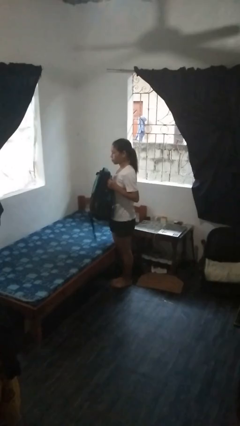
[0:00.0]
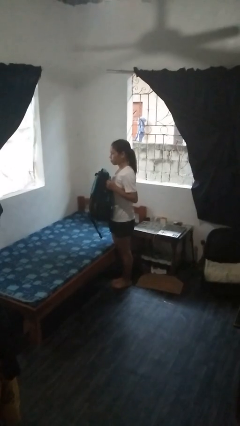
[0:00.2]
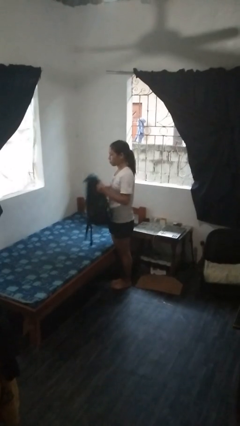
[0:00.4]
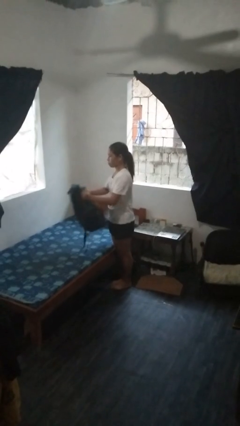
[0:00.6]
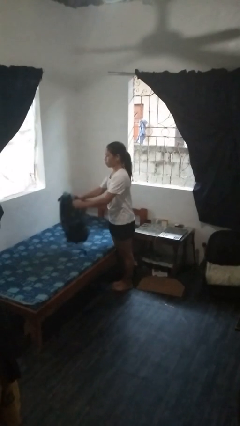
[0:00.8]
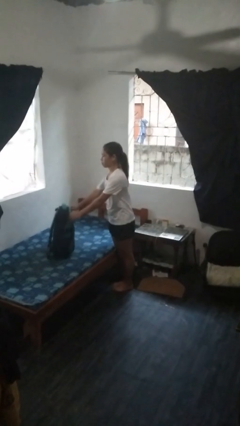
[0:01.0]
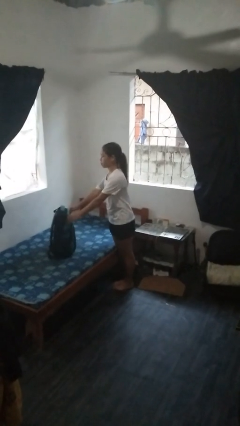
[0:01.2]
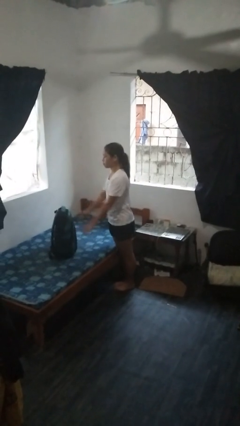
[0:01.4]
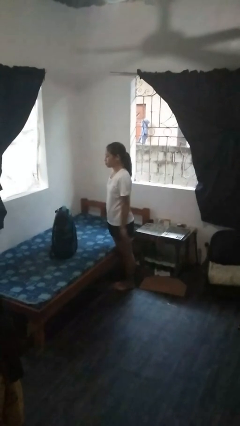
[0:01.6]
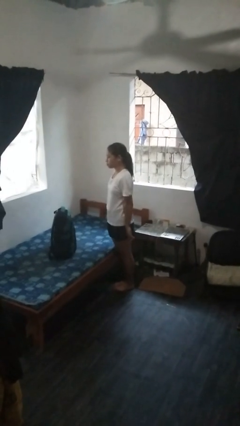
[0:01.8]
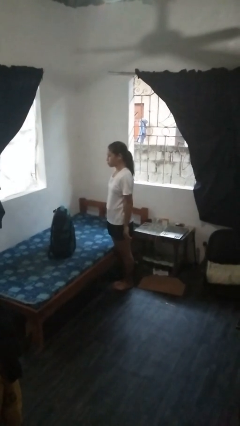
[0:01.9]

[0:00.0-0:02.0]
person puts down object on bed

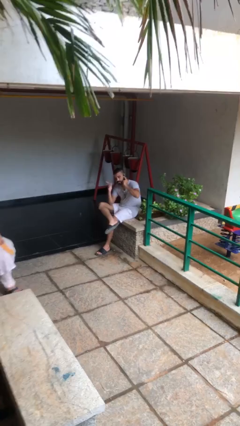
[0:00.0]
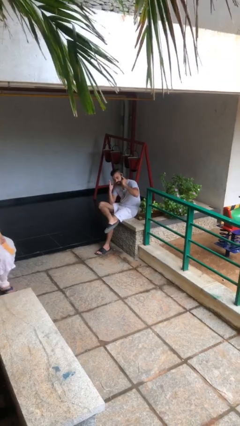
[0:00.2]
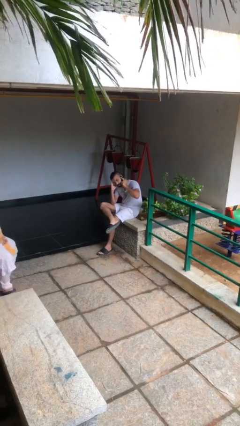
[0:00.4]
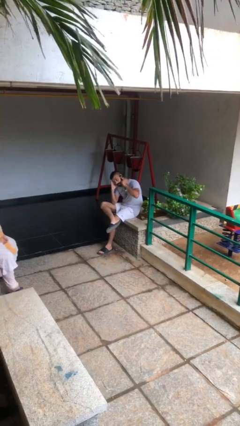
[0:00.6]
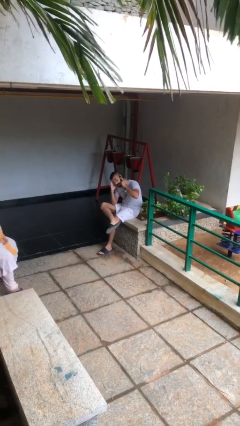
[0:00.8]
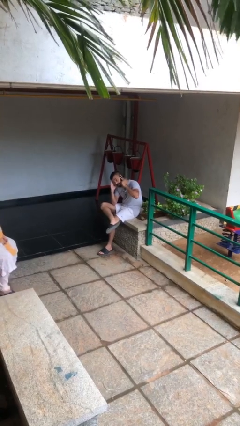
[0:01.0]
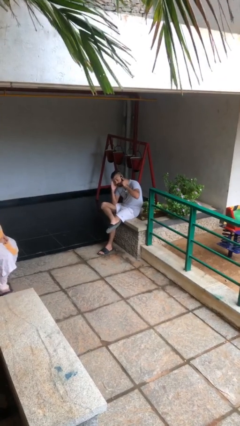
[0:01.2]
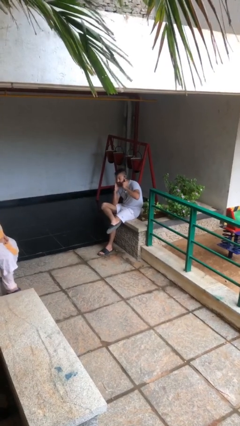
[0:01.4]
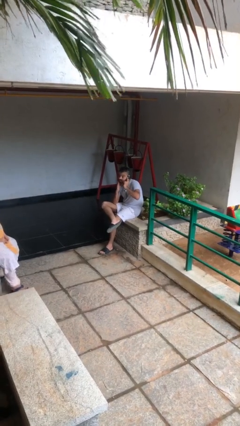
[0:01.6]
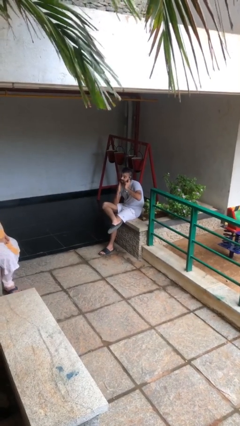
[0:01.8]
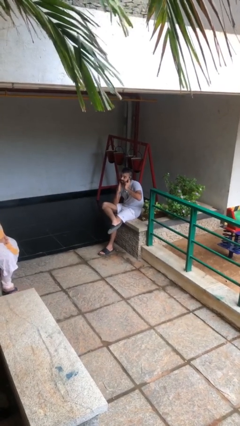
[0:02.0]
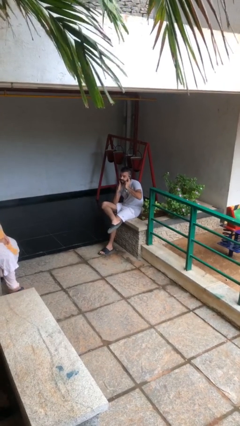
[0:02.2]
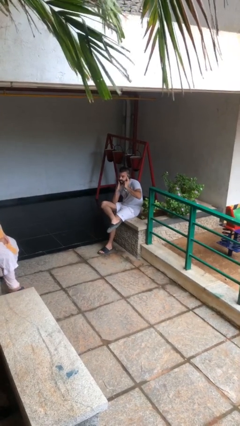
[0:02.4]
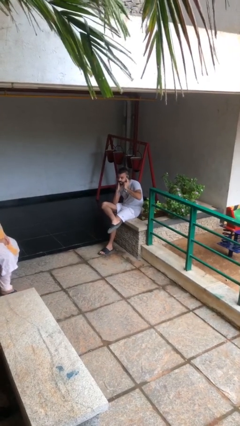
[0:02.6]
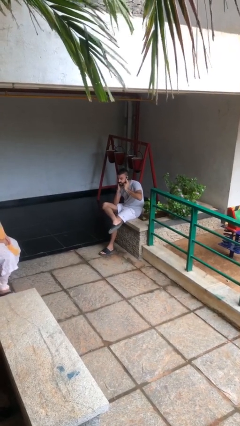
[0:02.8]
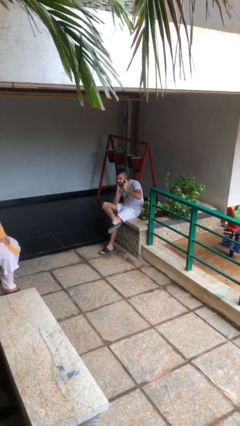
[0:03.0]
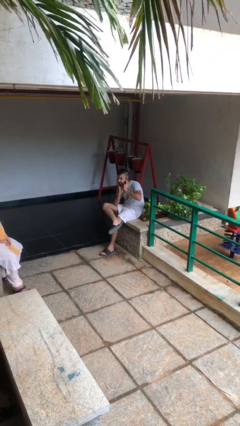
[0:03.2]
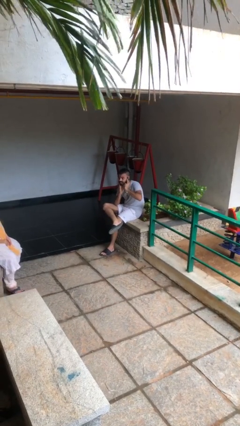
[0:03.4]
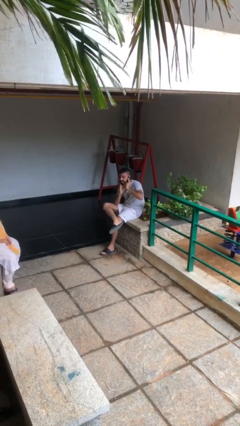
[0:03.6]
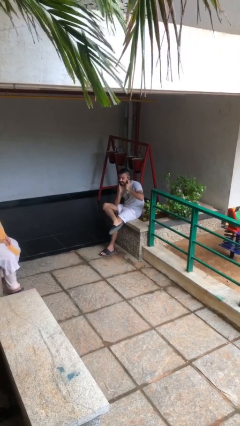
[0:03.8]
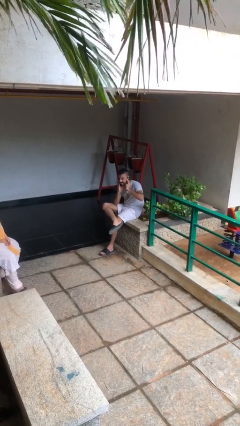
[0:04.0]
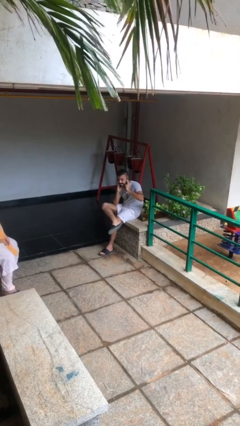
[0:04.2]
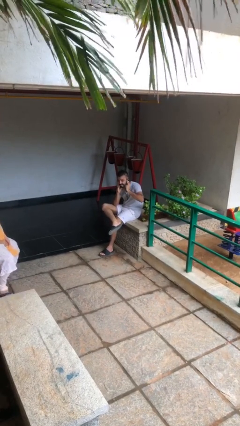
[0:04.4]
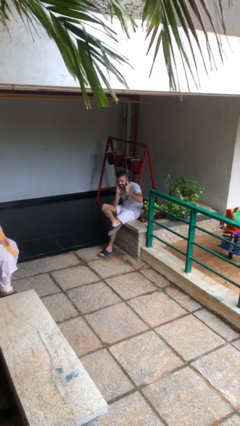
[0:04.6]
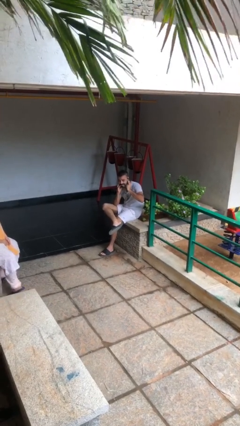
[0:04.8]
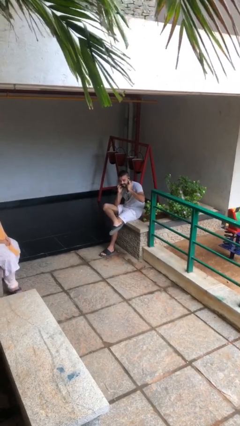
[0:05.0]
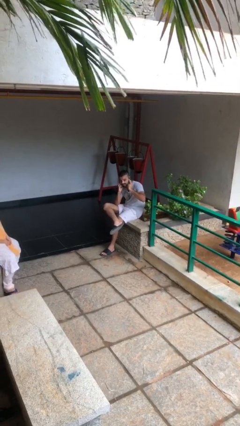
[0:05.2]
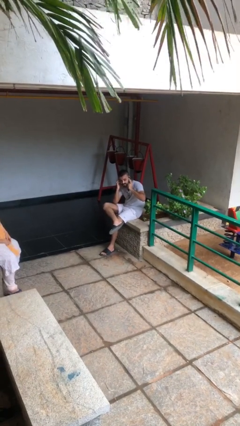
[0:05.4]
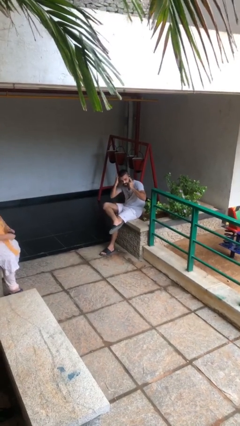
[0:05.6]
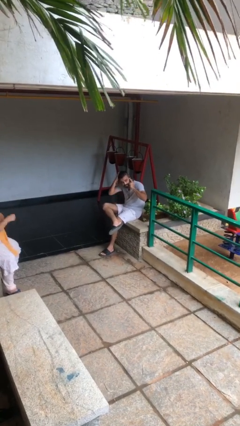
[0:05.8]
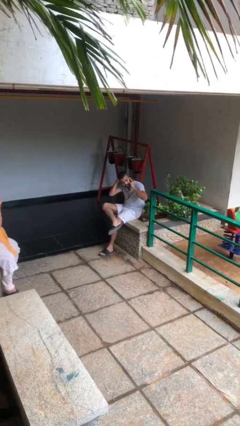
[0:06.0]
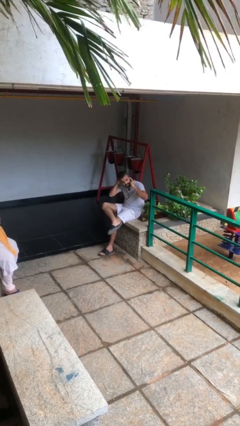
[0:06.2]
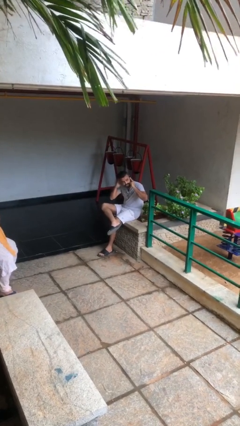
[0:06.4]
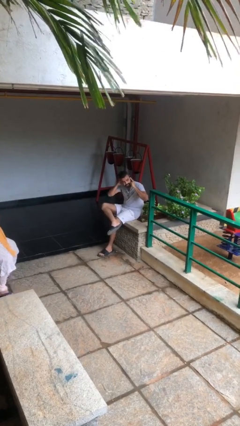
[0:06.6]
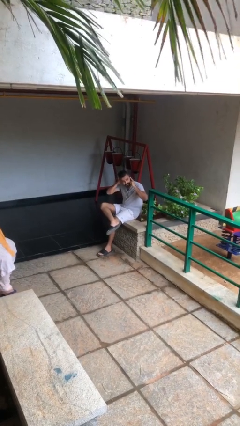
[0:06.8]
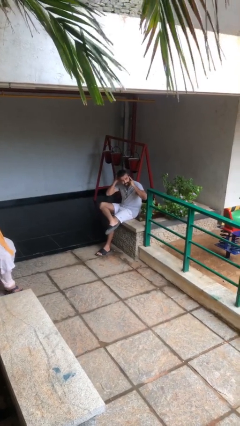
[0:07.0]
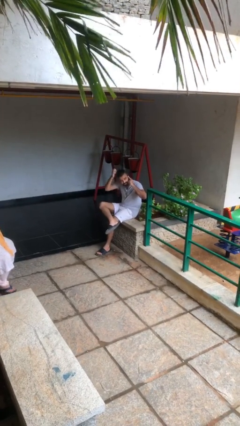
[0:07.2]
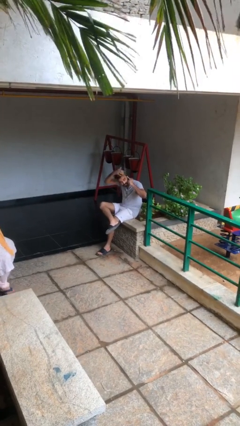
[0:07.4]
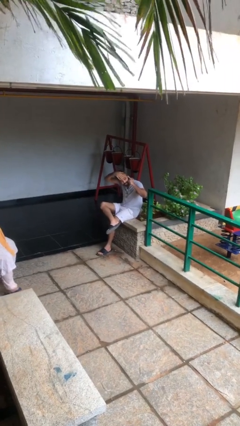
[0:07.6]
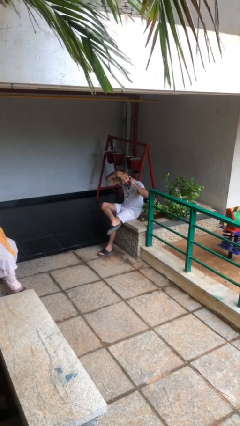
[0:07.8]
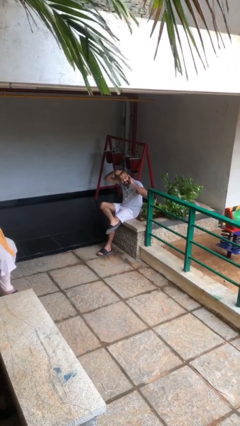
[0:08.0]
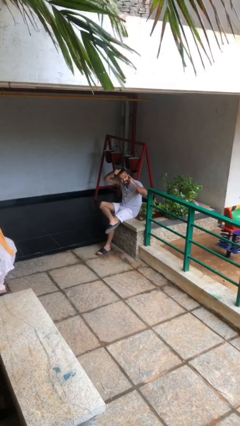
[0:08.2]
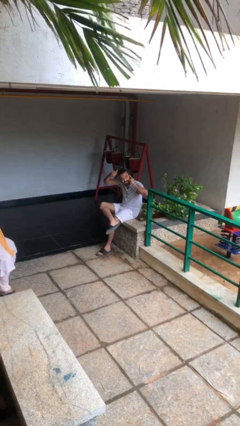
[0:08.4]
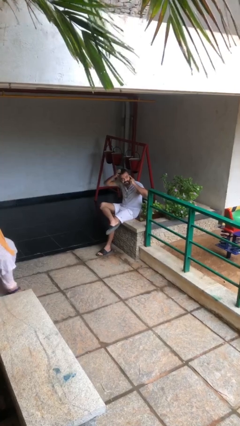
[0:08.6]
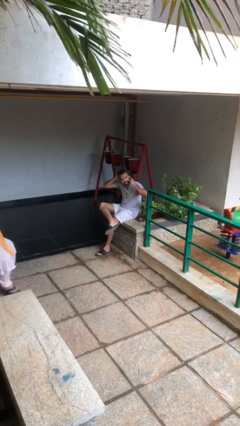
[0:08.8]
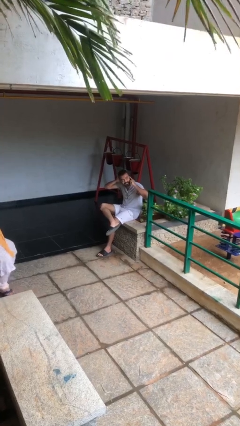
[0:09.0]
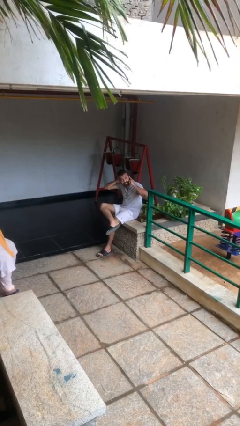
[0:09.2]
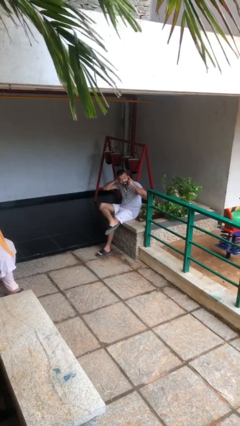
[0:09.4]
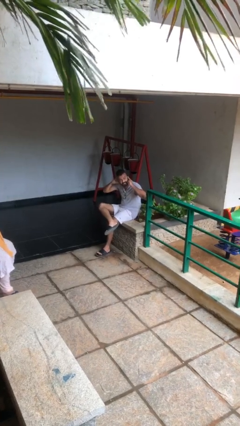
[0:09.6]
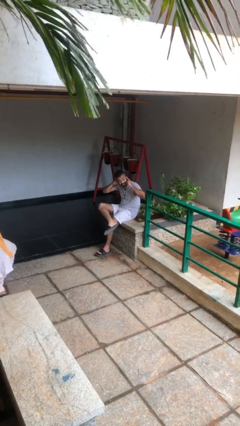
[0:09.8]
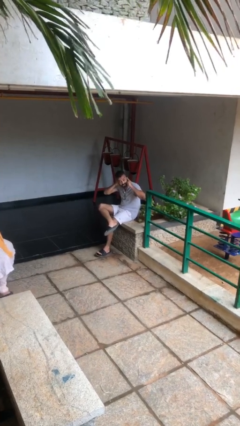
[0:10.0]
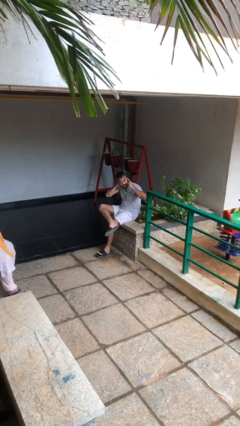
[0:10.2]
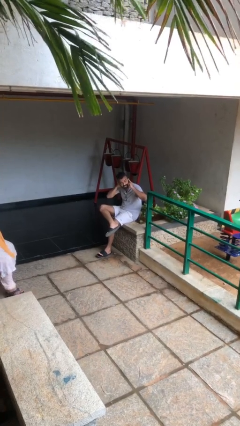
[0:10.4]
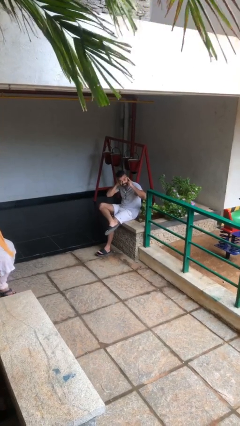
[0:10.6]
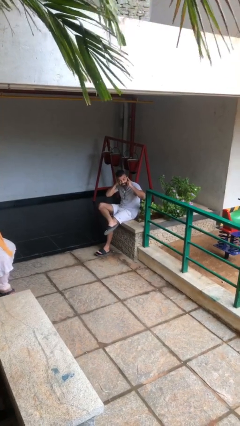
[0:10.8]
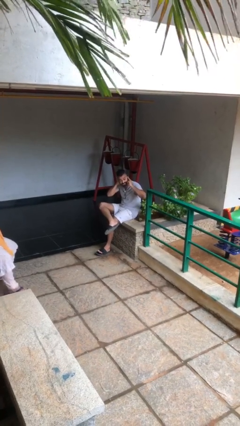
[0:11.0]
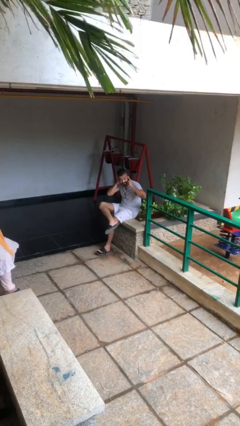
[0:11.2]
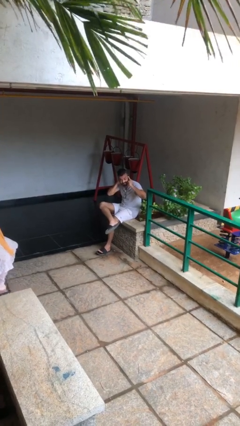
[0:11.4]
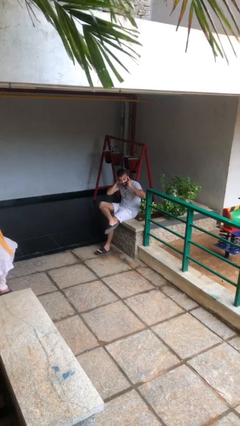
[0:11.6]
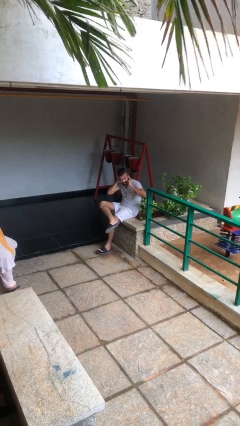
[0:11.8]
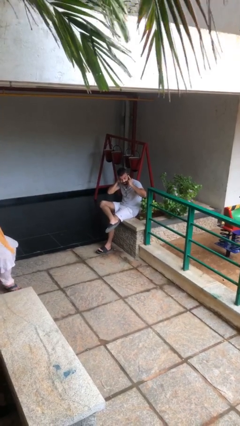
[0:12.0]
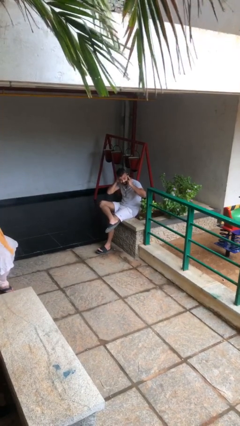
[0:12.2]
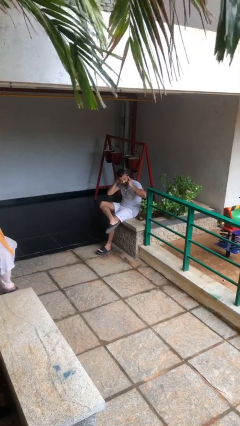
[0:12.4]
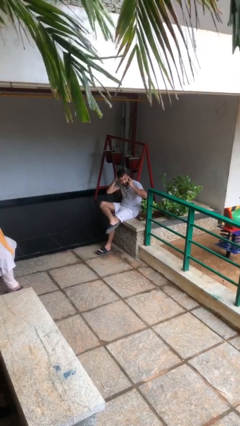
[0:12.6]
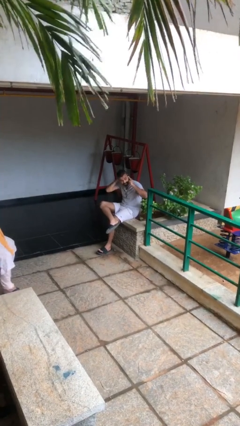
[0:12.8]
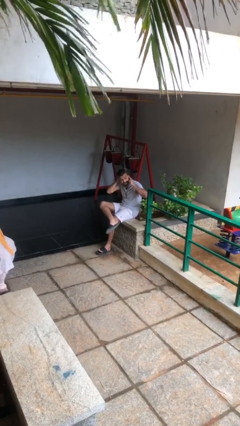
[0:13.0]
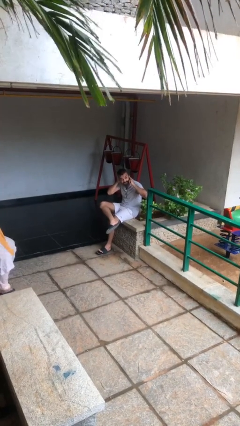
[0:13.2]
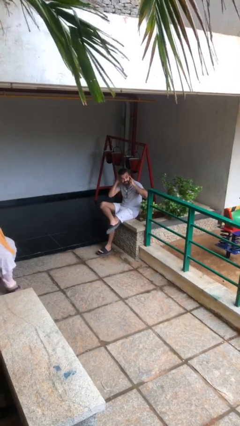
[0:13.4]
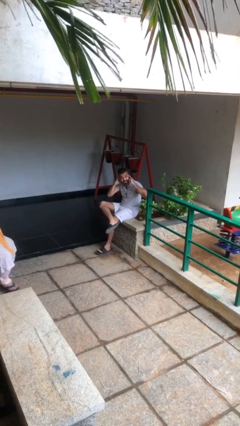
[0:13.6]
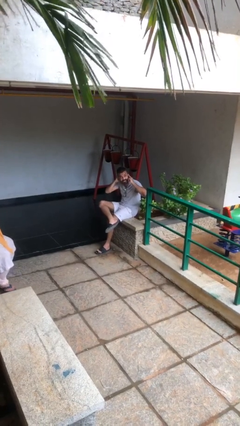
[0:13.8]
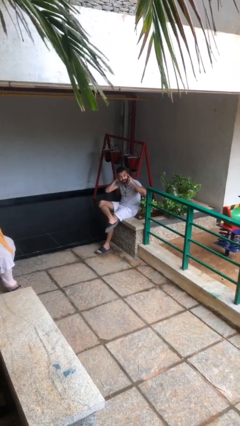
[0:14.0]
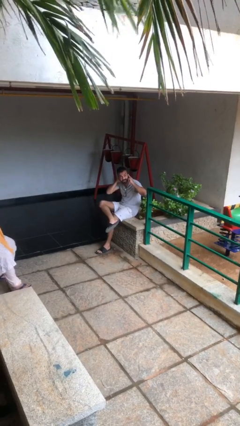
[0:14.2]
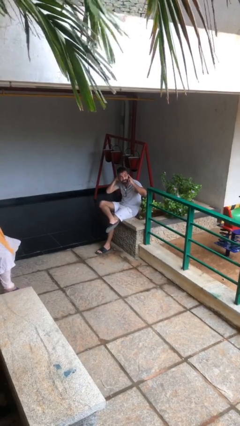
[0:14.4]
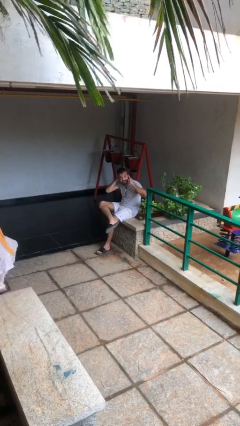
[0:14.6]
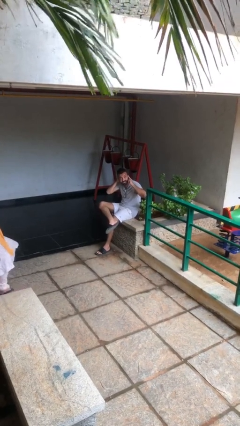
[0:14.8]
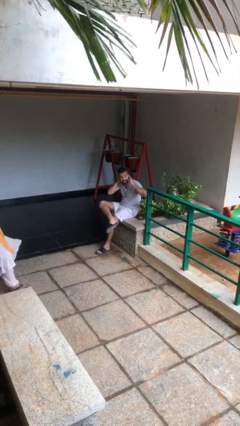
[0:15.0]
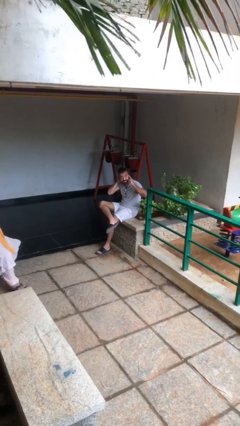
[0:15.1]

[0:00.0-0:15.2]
person talks on phone

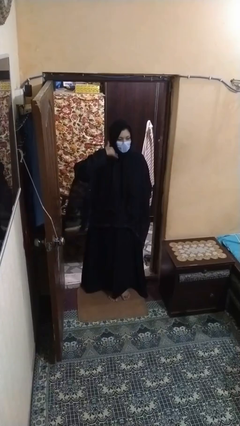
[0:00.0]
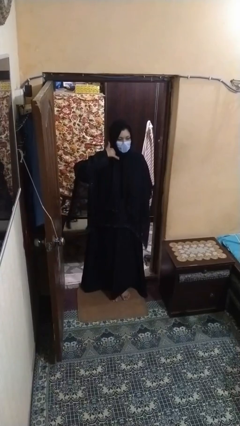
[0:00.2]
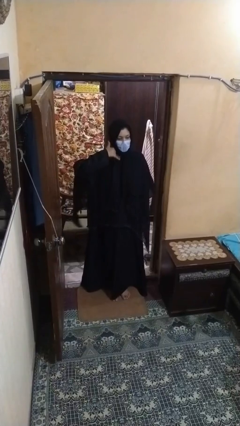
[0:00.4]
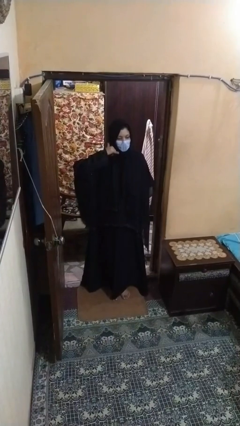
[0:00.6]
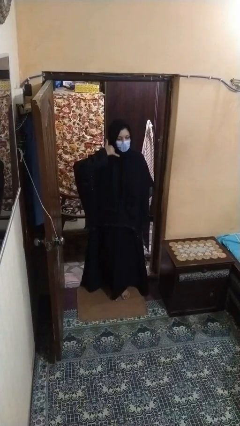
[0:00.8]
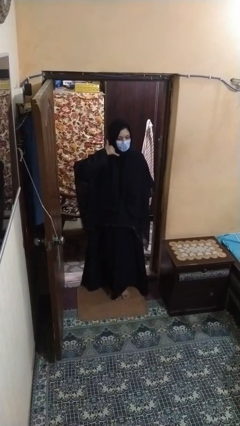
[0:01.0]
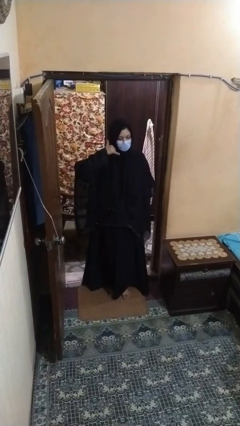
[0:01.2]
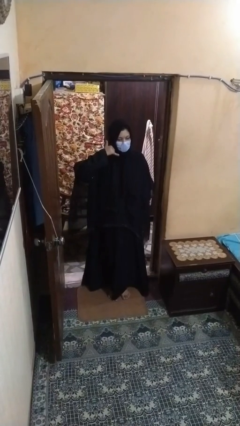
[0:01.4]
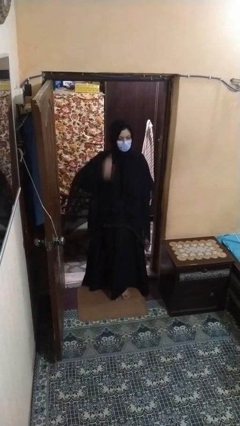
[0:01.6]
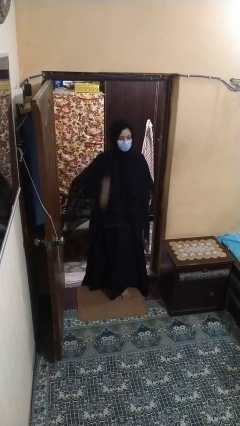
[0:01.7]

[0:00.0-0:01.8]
person gestures call me
